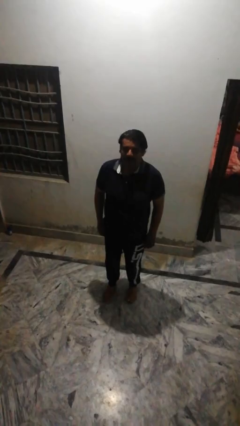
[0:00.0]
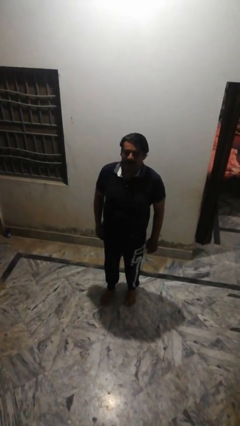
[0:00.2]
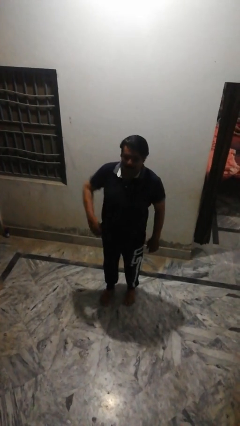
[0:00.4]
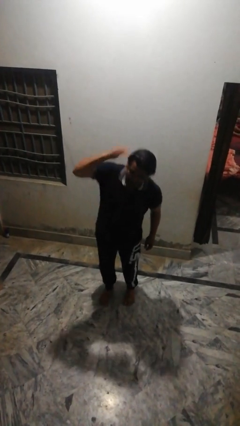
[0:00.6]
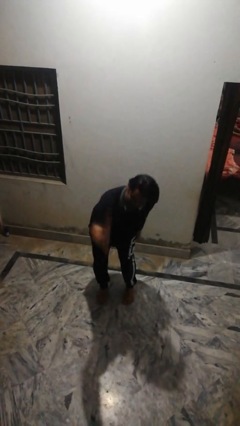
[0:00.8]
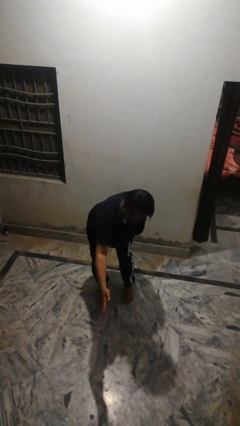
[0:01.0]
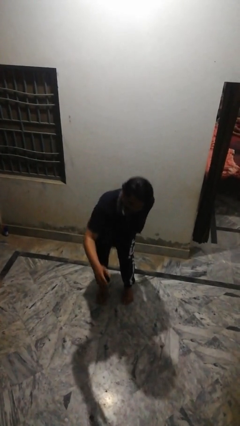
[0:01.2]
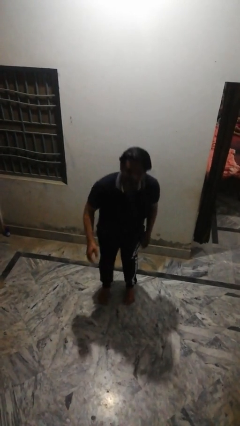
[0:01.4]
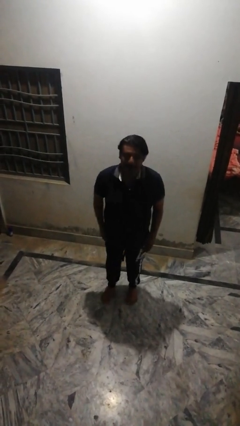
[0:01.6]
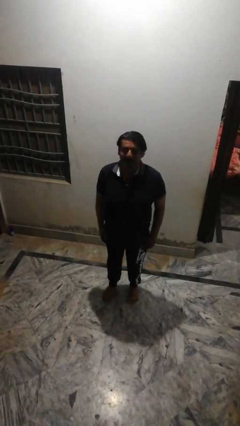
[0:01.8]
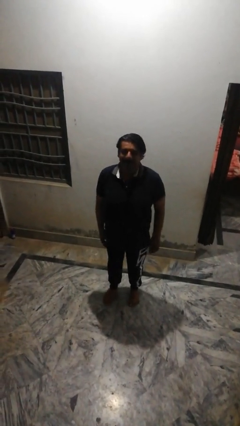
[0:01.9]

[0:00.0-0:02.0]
person karate chop

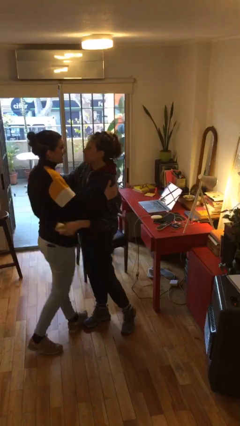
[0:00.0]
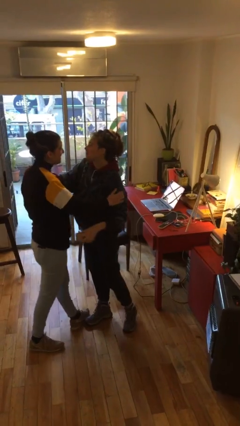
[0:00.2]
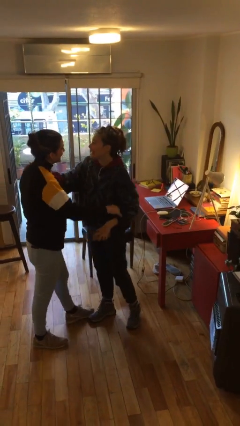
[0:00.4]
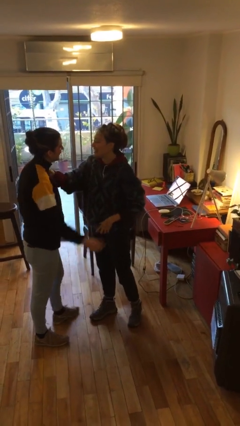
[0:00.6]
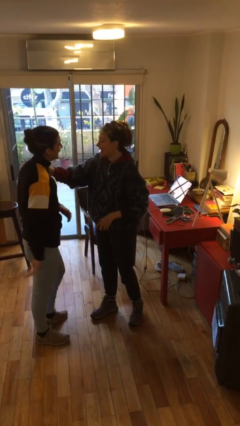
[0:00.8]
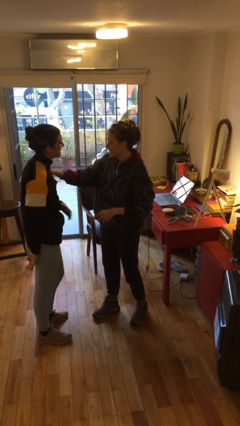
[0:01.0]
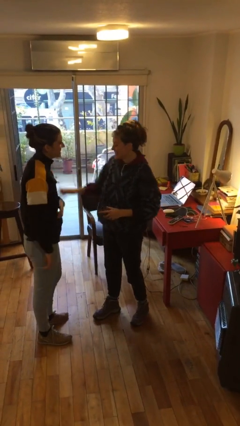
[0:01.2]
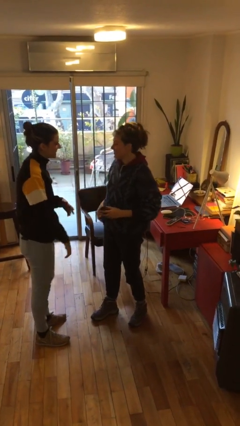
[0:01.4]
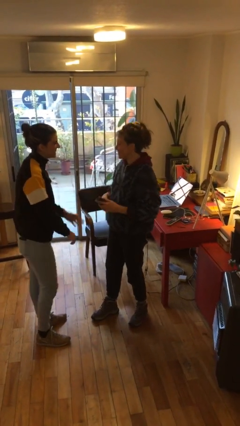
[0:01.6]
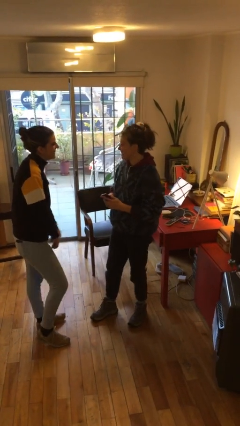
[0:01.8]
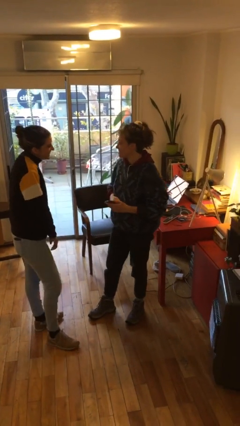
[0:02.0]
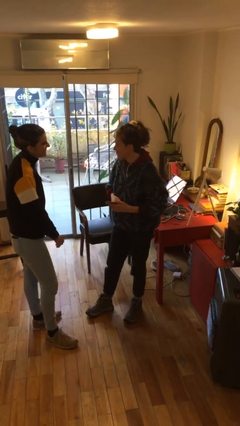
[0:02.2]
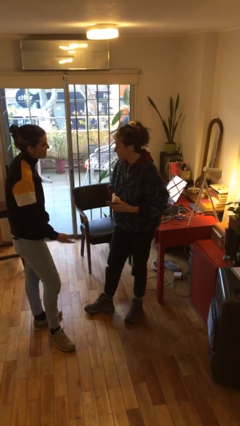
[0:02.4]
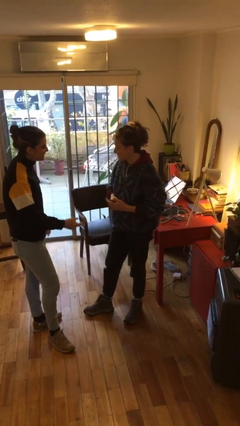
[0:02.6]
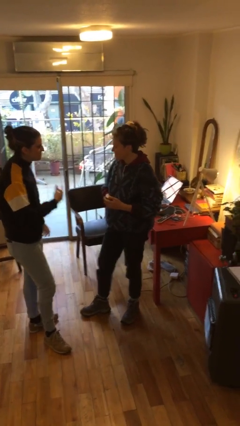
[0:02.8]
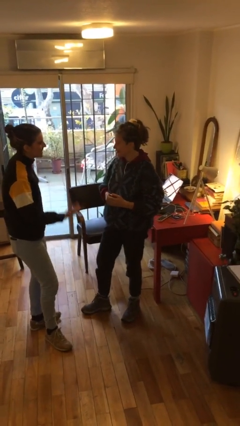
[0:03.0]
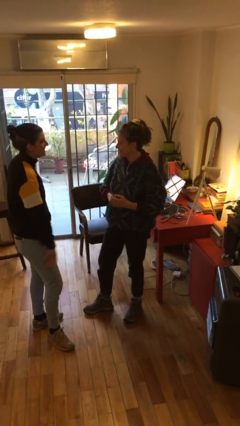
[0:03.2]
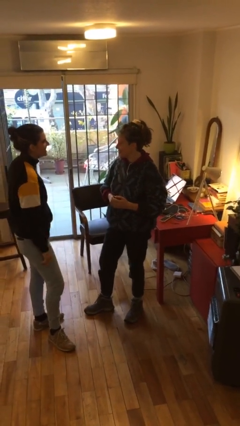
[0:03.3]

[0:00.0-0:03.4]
person talks to person

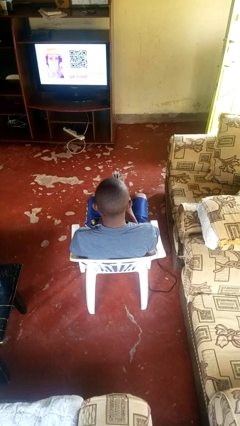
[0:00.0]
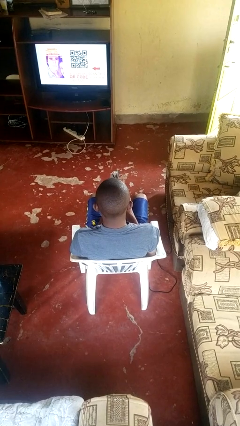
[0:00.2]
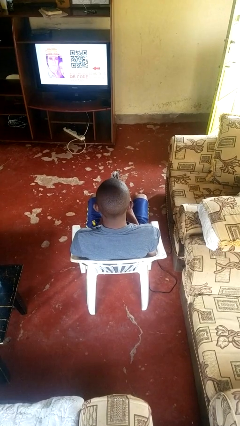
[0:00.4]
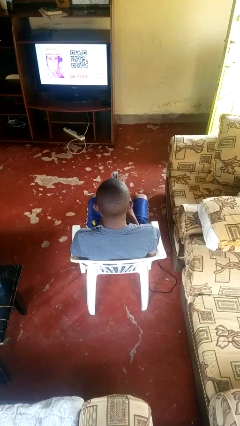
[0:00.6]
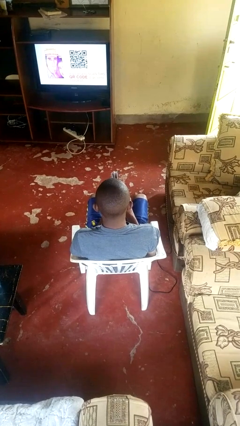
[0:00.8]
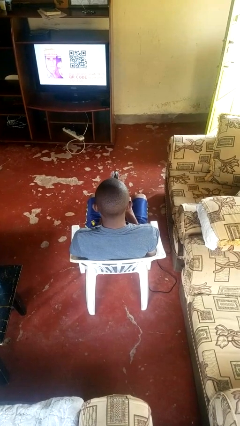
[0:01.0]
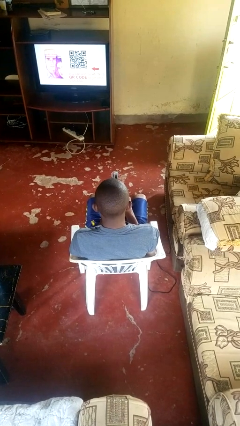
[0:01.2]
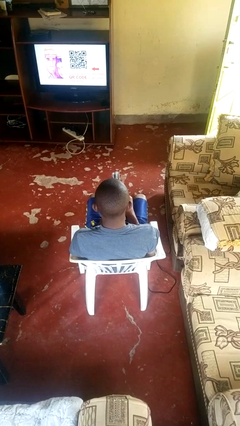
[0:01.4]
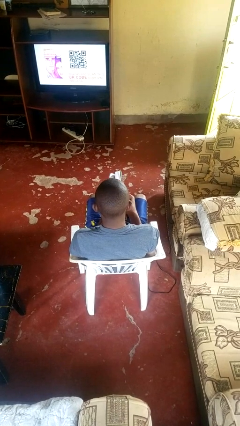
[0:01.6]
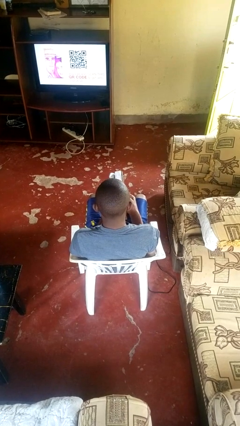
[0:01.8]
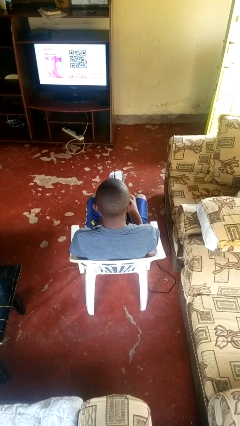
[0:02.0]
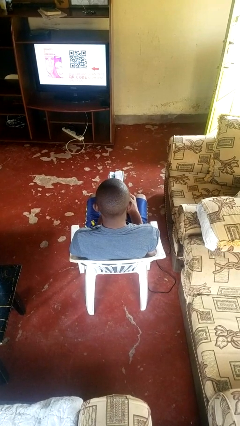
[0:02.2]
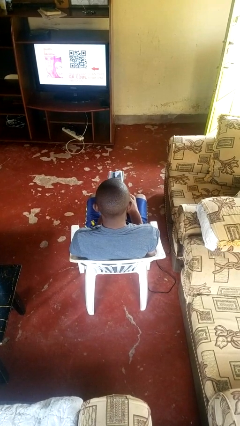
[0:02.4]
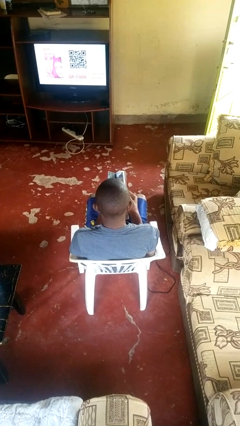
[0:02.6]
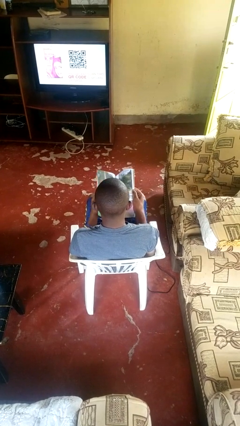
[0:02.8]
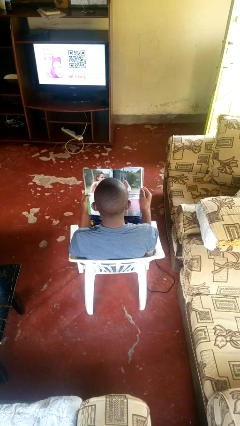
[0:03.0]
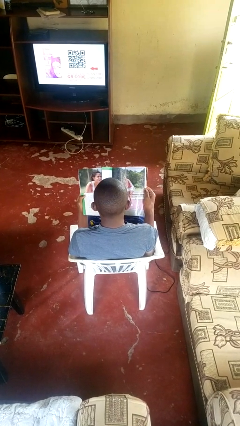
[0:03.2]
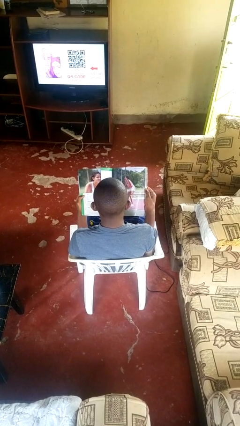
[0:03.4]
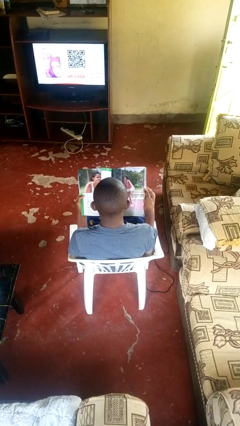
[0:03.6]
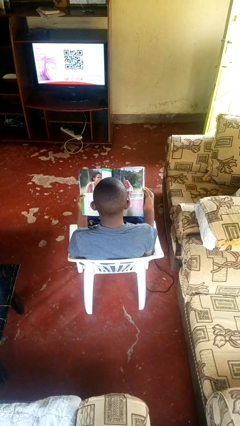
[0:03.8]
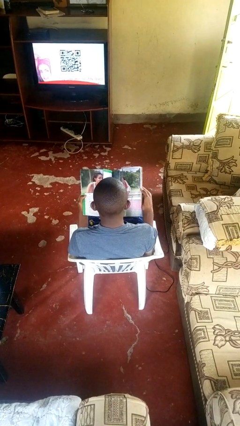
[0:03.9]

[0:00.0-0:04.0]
person reads magazine

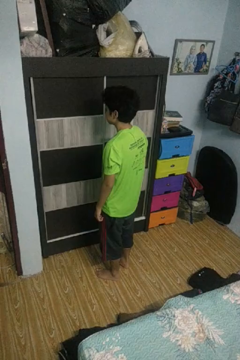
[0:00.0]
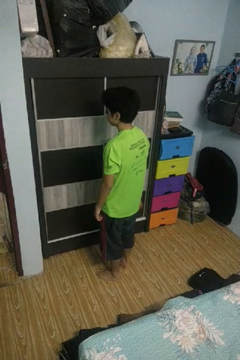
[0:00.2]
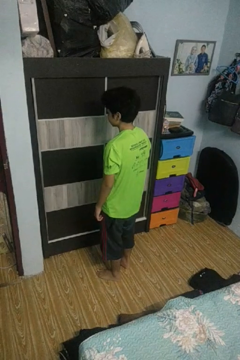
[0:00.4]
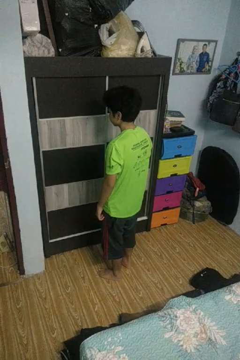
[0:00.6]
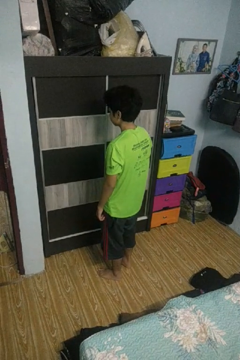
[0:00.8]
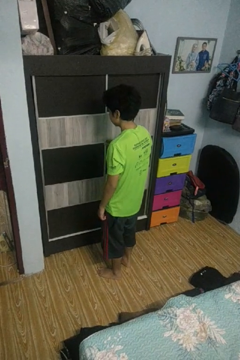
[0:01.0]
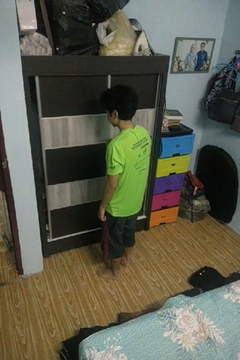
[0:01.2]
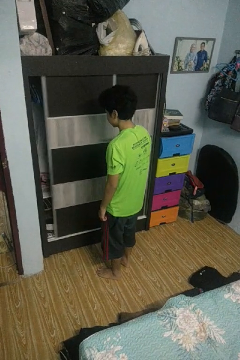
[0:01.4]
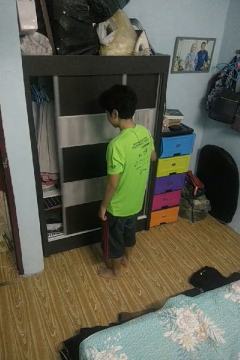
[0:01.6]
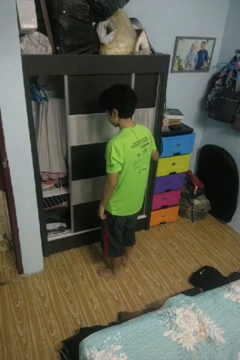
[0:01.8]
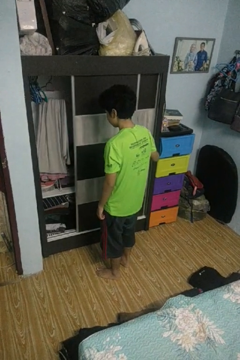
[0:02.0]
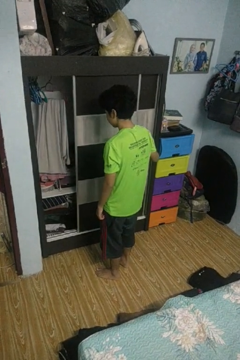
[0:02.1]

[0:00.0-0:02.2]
person opens closet door

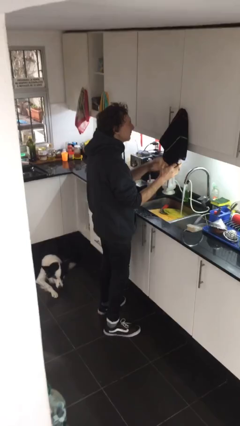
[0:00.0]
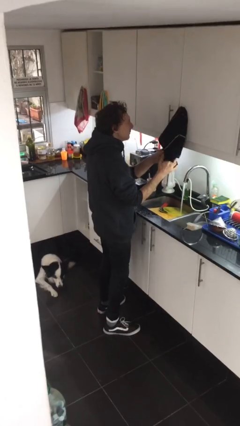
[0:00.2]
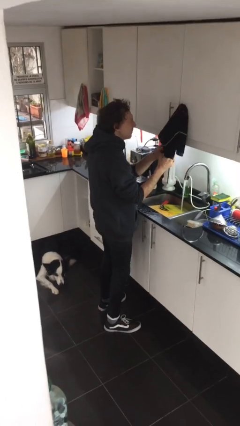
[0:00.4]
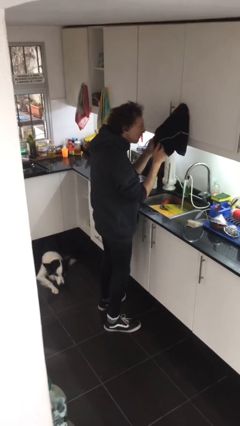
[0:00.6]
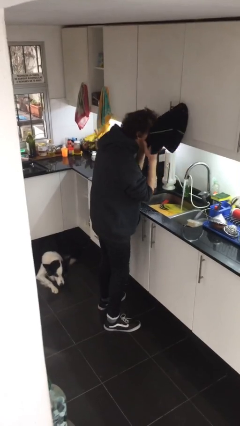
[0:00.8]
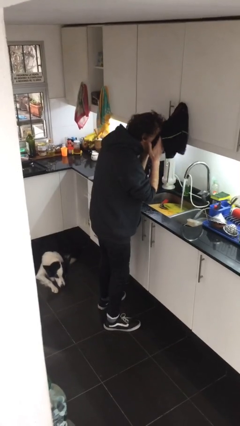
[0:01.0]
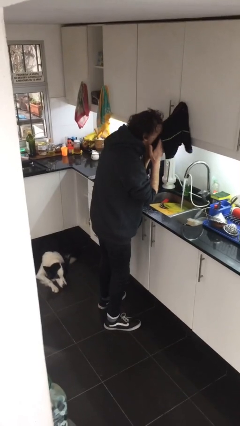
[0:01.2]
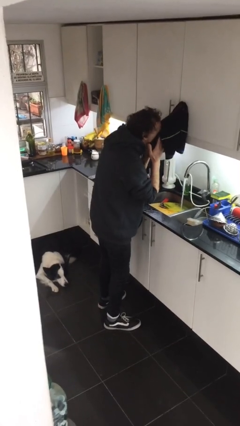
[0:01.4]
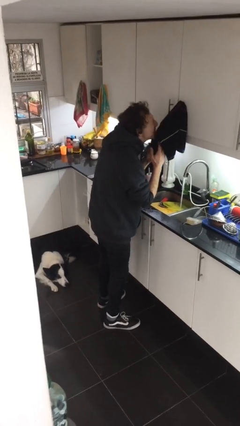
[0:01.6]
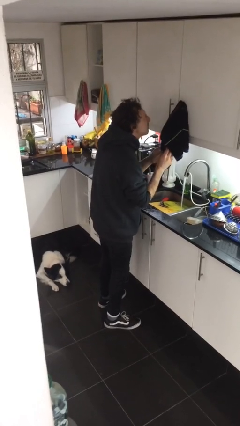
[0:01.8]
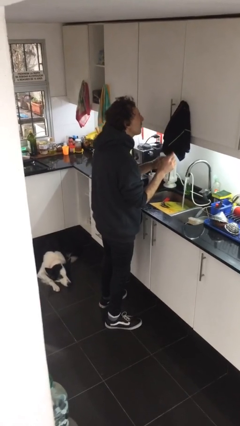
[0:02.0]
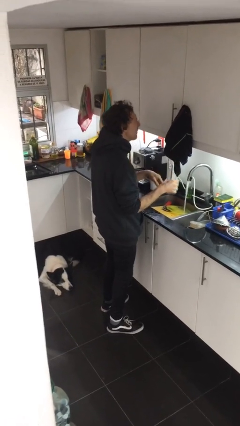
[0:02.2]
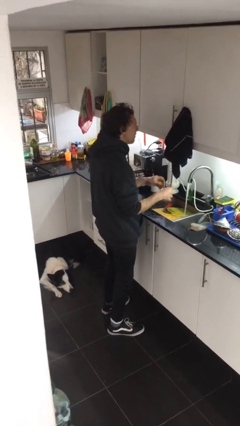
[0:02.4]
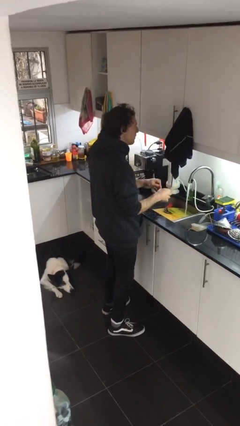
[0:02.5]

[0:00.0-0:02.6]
person dries face with towel

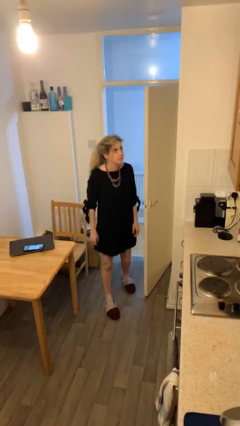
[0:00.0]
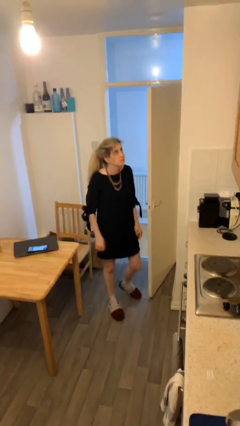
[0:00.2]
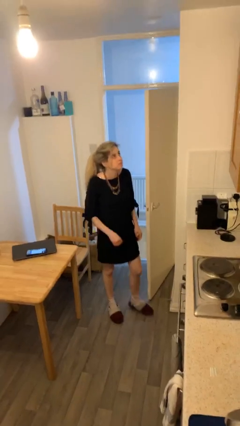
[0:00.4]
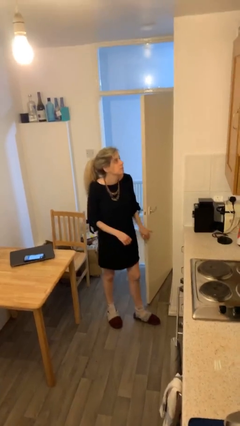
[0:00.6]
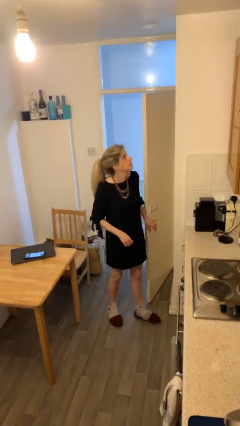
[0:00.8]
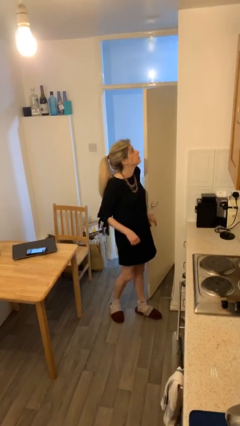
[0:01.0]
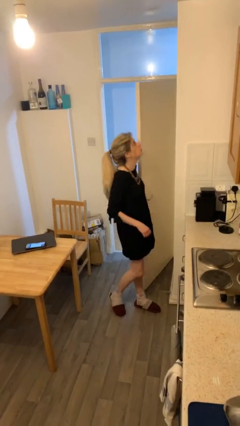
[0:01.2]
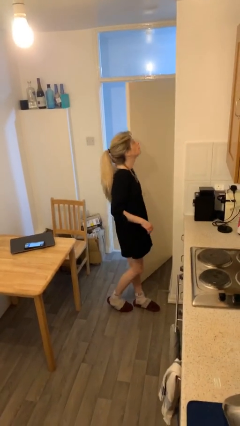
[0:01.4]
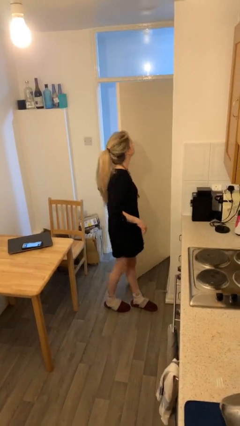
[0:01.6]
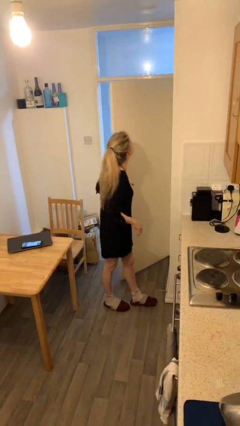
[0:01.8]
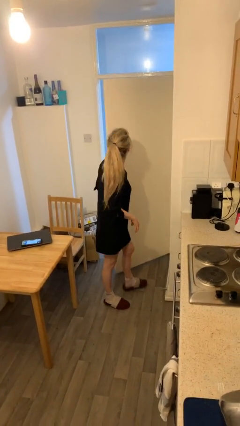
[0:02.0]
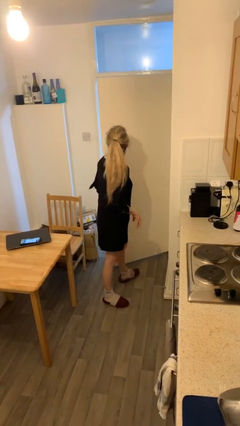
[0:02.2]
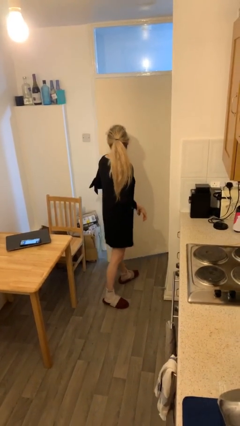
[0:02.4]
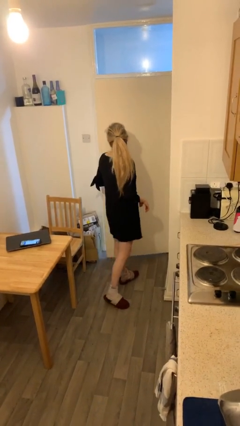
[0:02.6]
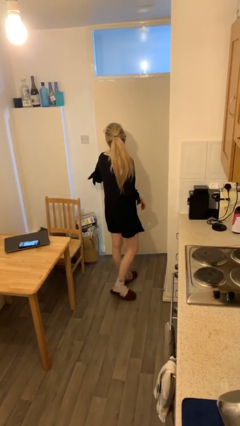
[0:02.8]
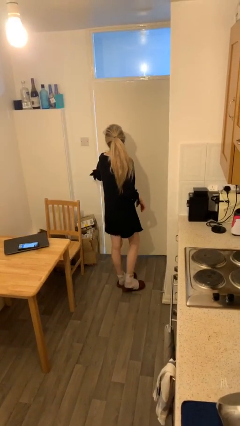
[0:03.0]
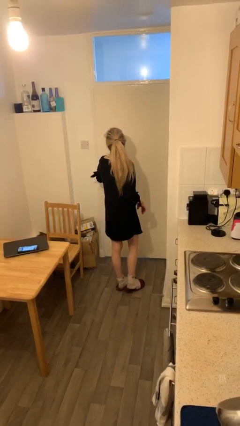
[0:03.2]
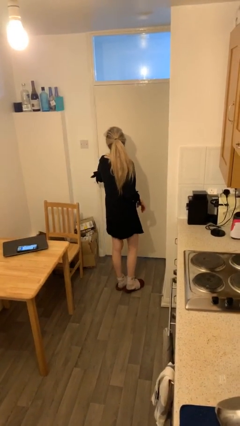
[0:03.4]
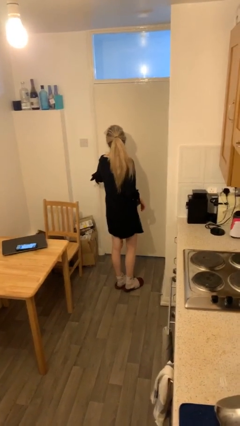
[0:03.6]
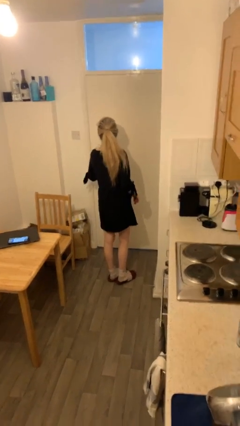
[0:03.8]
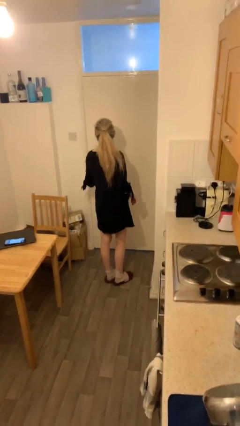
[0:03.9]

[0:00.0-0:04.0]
person closes facility door
